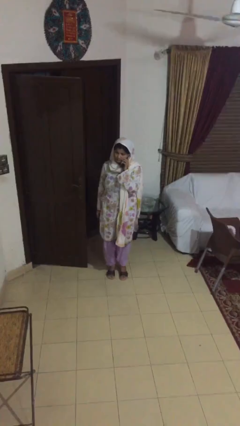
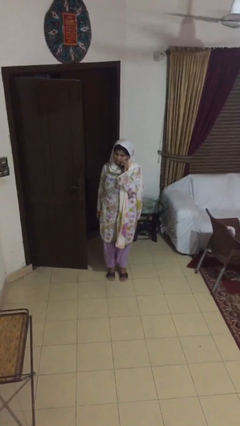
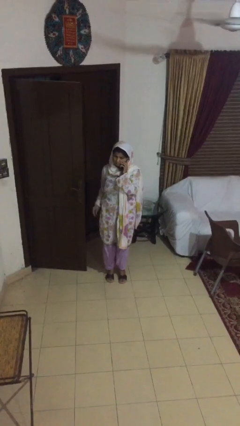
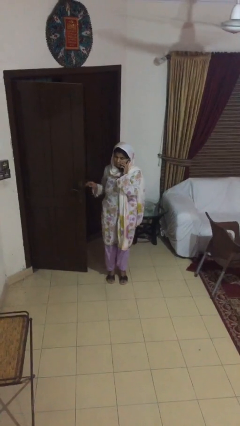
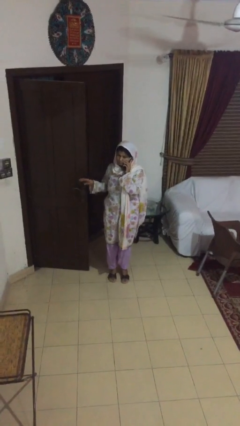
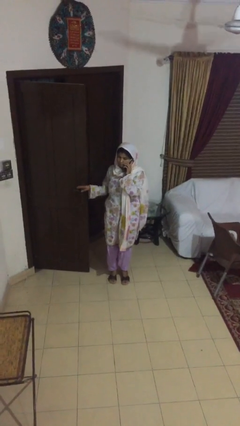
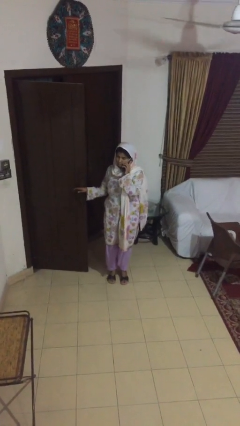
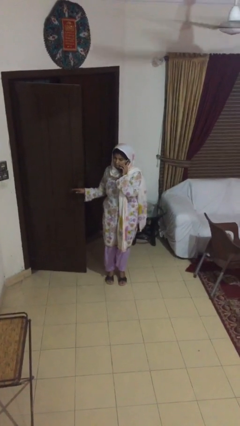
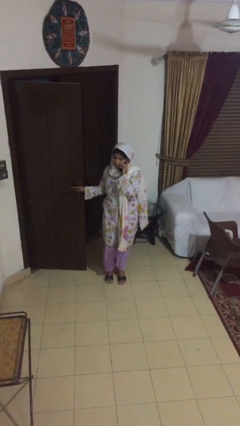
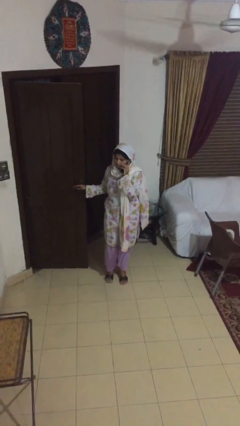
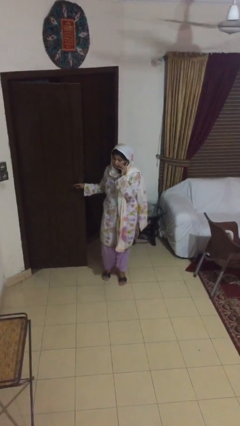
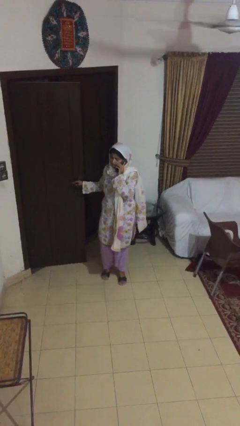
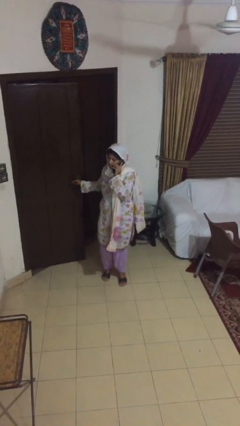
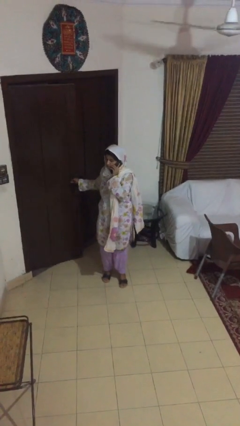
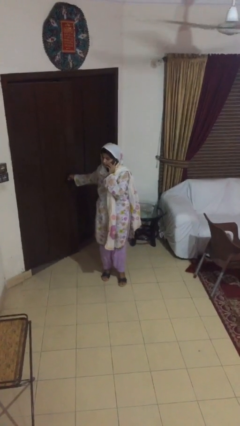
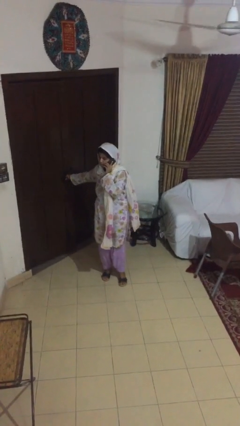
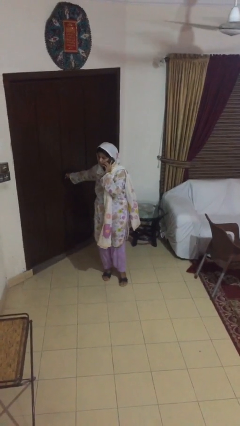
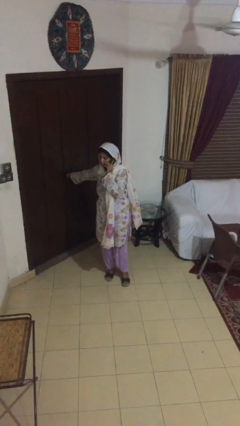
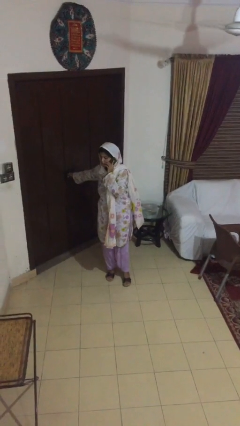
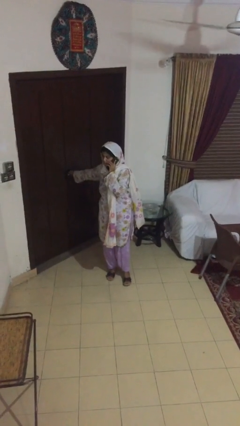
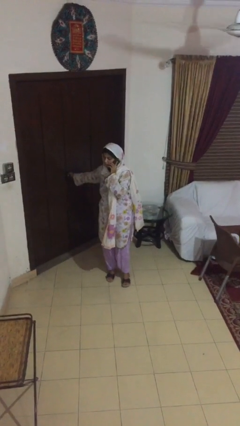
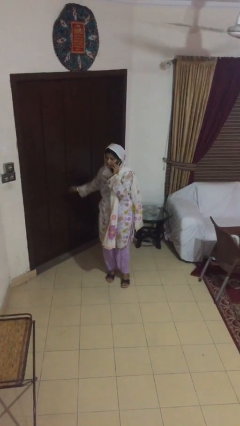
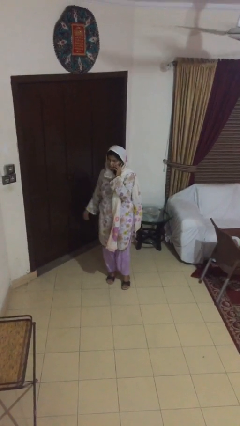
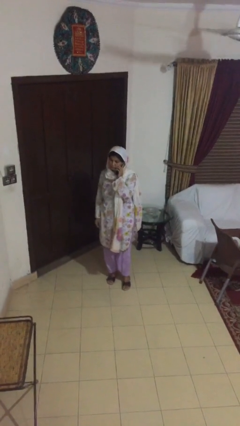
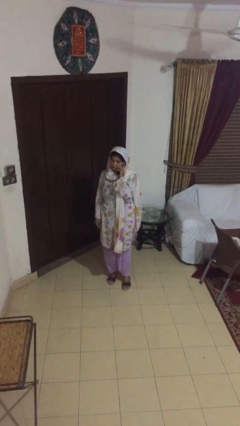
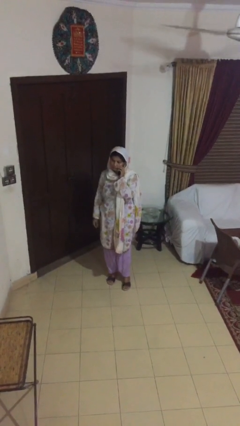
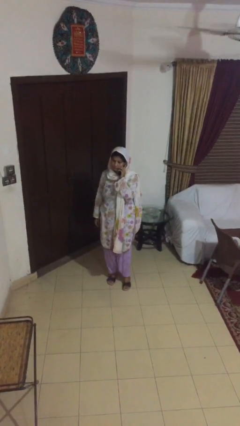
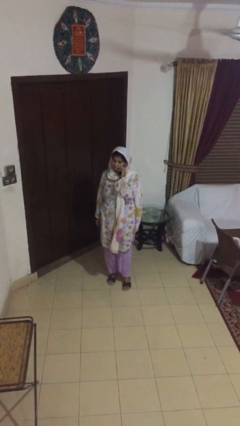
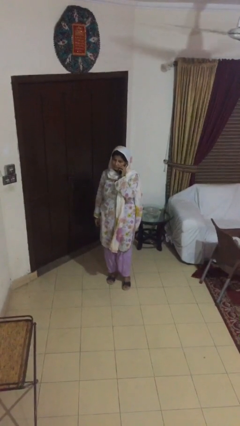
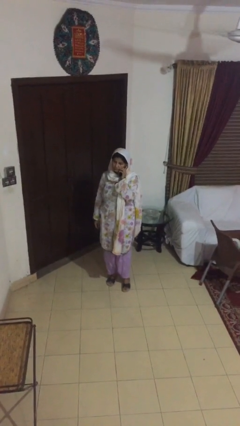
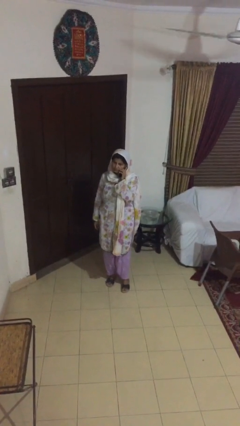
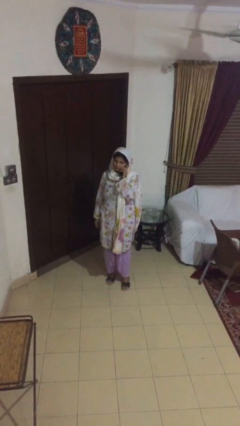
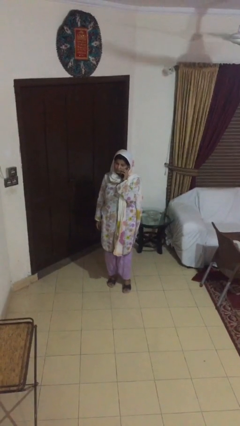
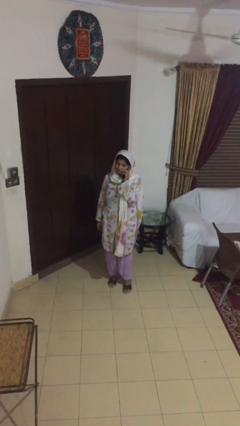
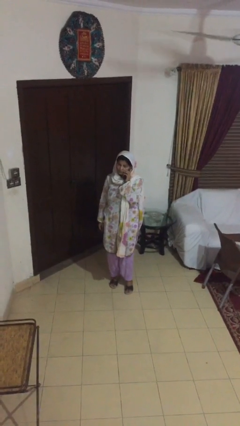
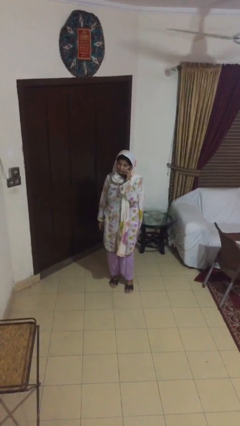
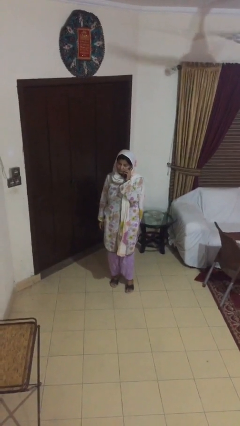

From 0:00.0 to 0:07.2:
person closes facility door

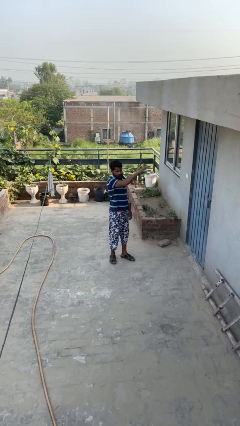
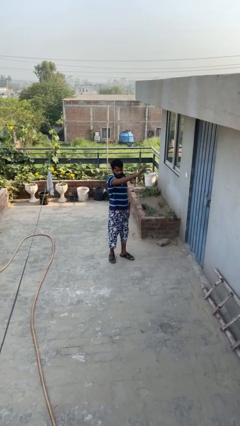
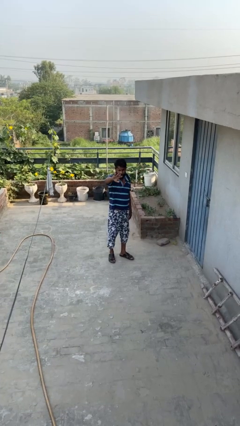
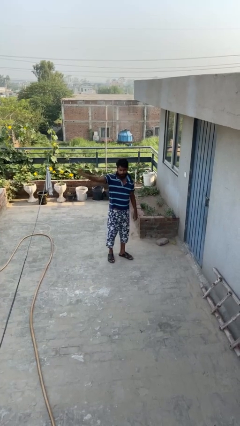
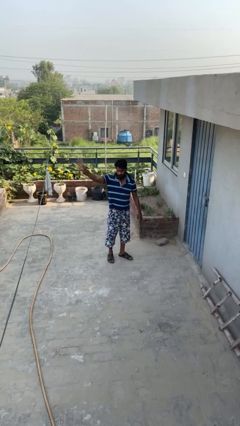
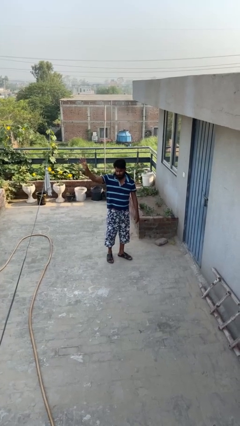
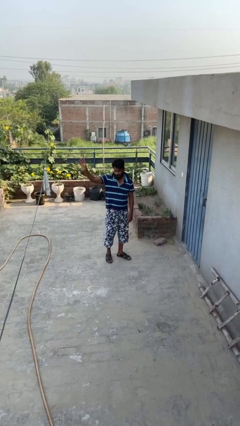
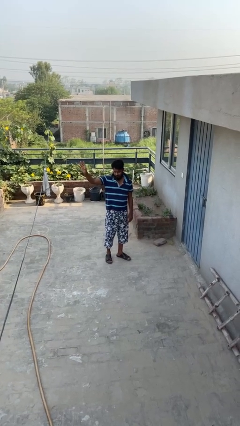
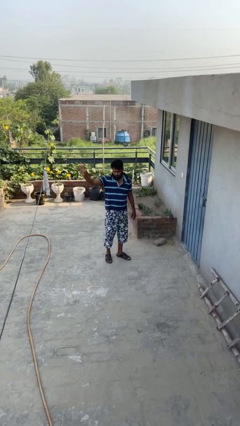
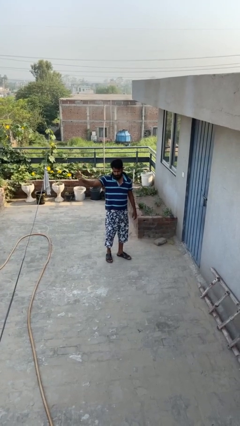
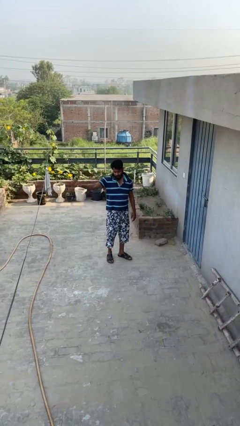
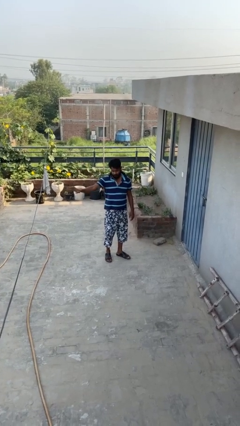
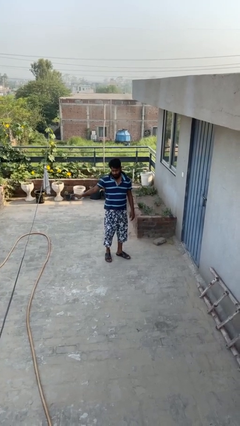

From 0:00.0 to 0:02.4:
person gestures swipe right

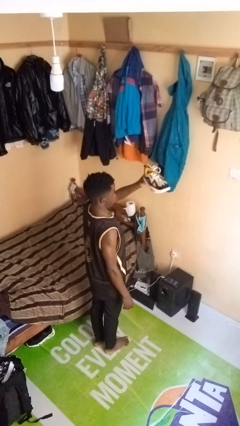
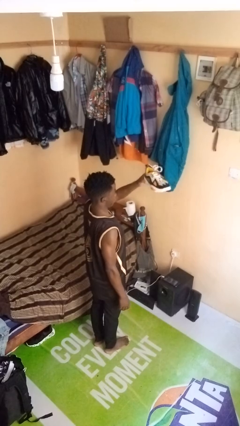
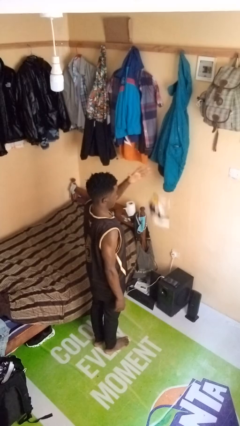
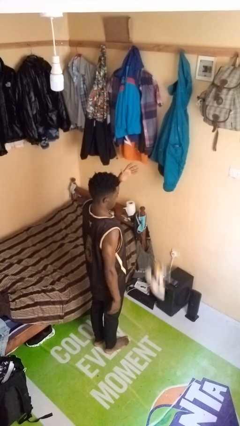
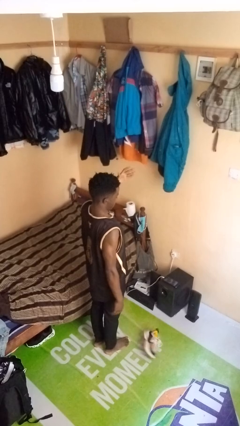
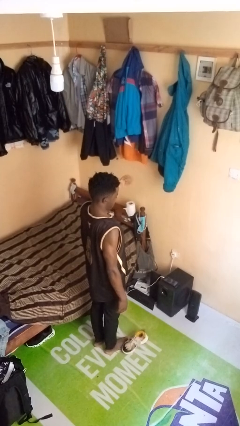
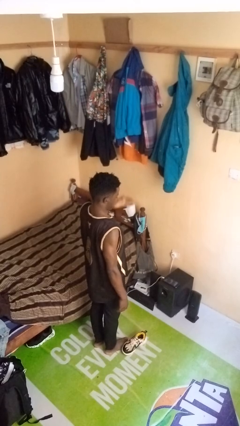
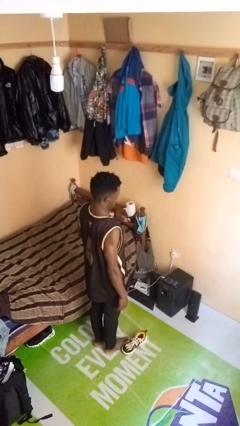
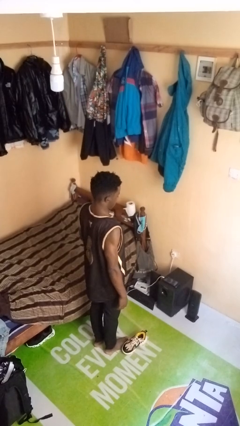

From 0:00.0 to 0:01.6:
person drops object

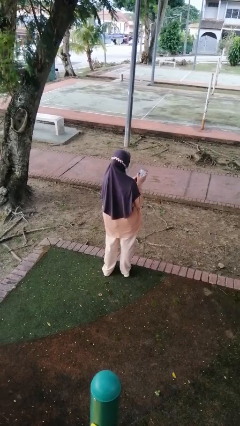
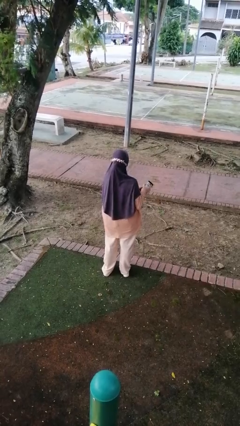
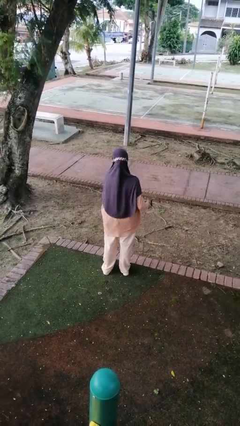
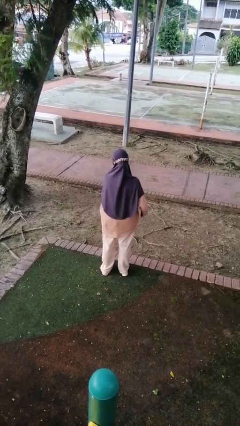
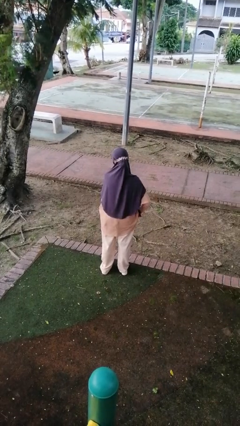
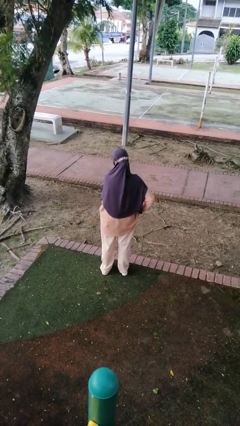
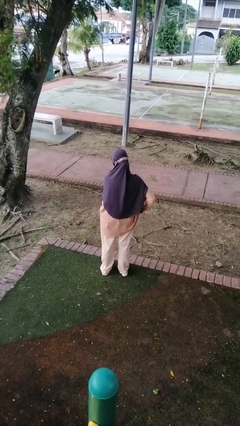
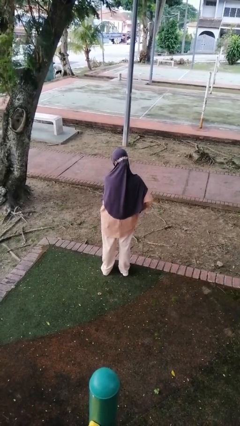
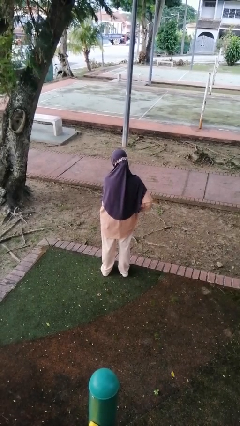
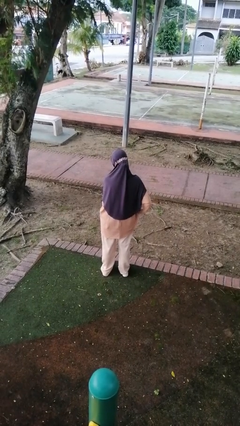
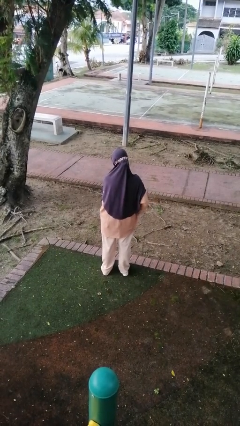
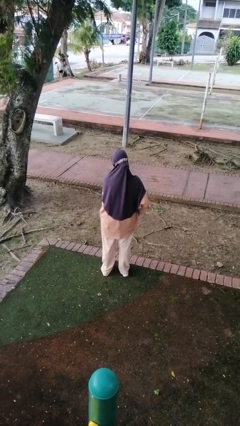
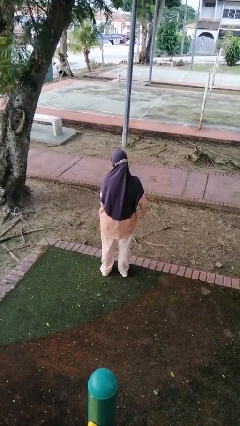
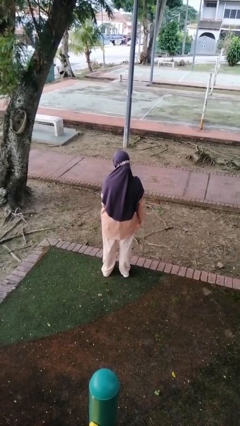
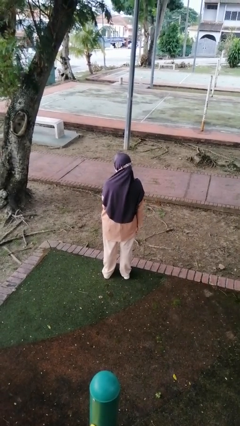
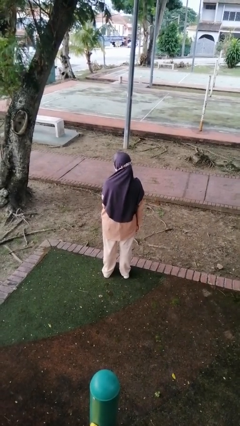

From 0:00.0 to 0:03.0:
person puts phone into pocket

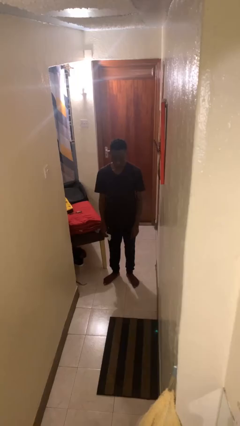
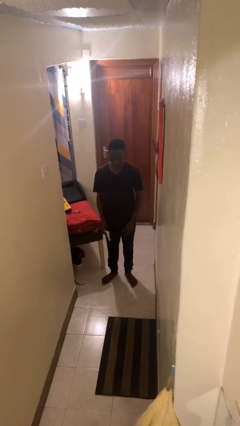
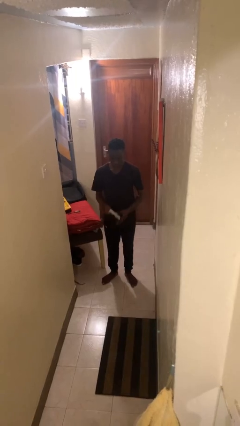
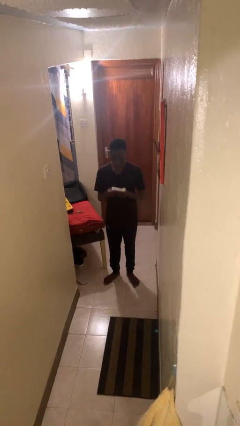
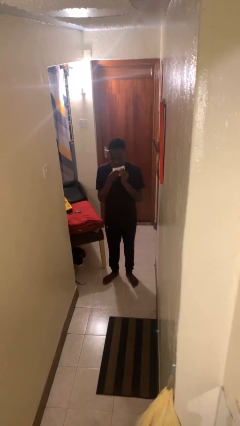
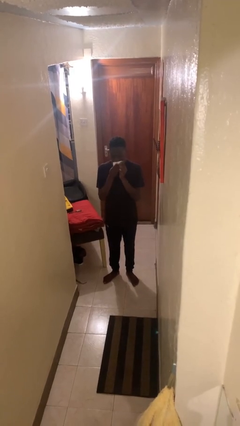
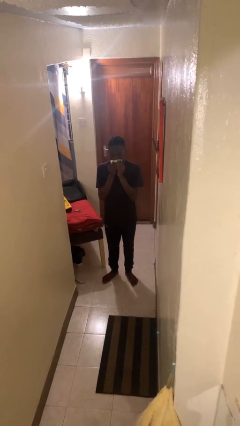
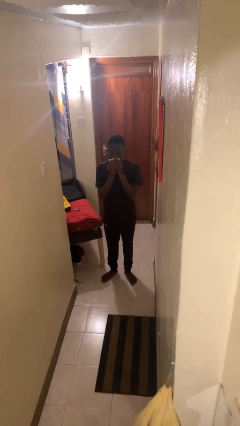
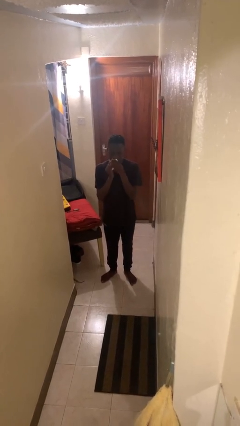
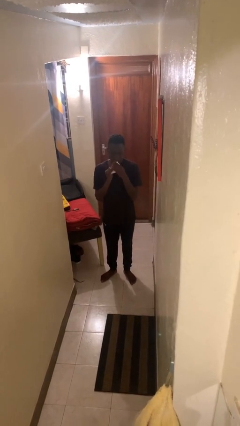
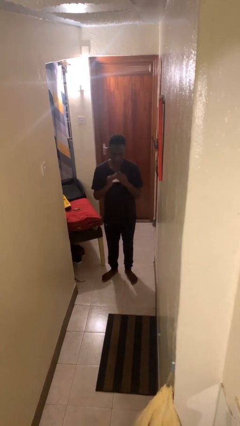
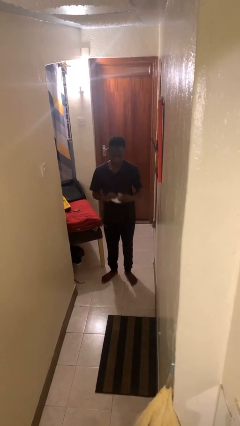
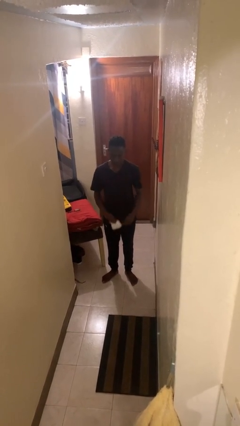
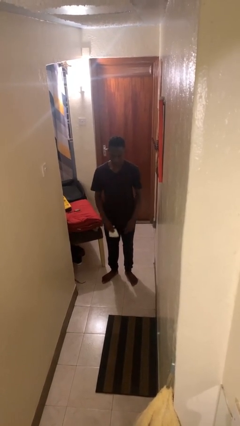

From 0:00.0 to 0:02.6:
person wipes mouth with napkin

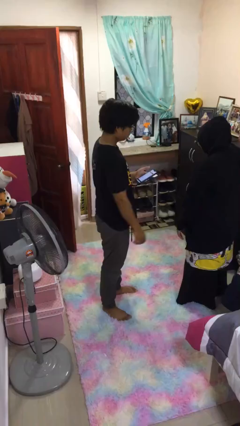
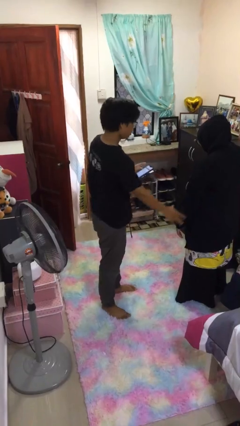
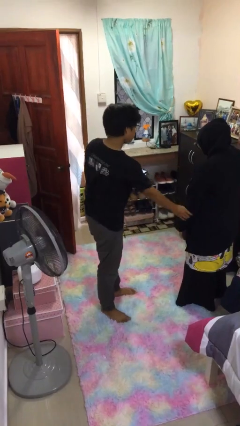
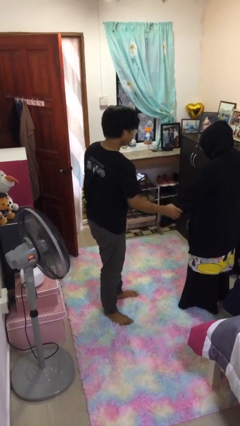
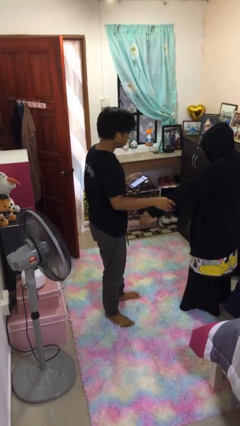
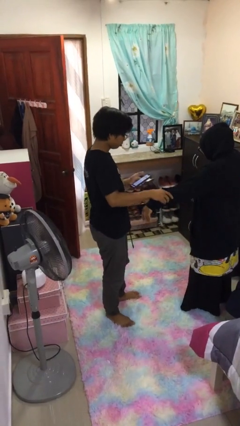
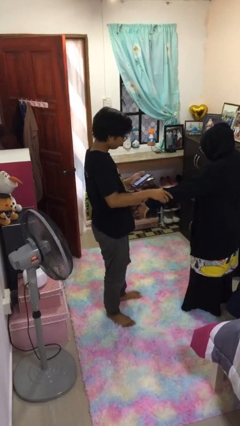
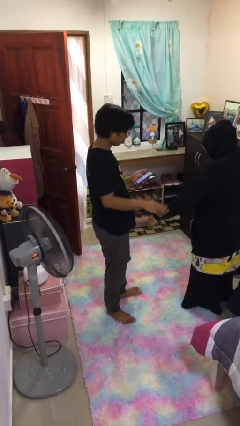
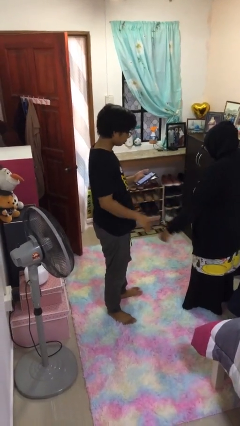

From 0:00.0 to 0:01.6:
person grabs person by forearm
